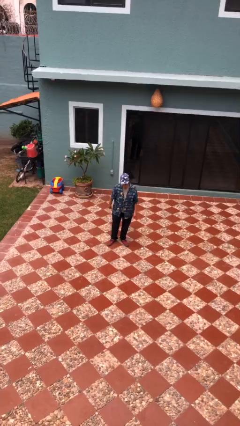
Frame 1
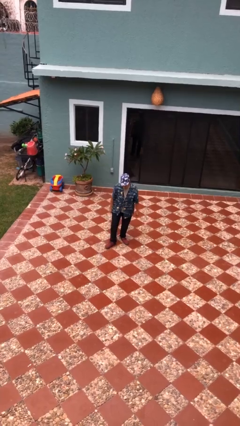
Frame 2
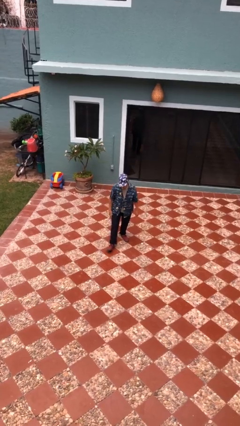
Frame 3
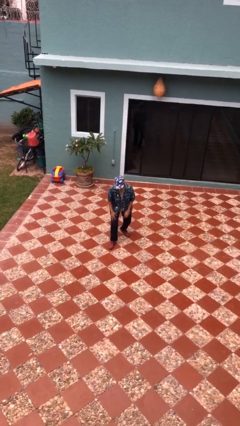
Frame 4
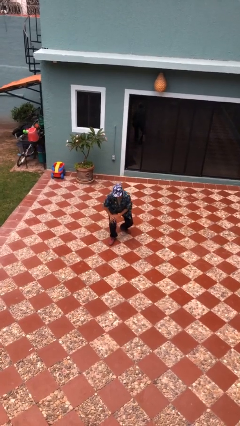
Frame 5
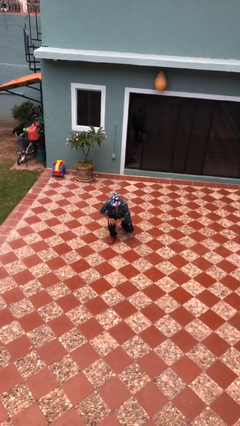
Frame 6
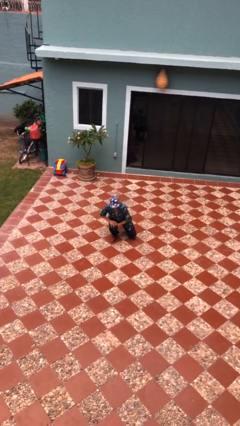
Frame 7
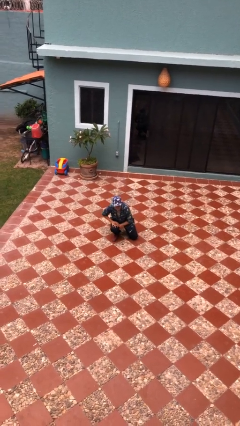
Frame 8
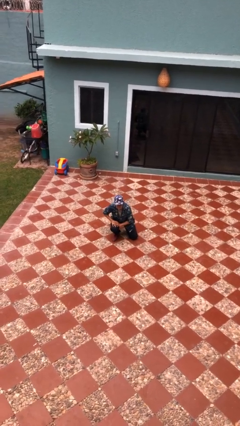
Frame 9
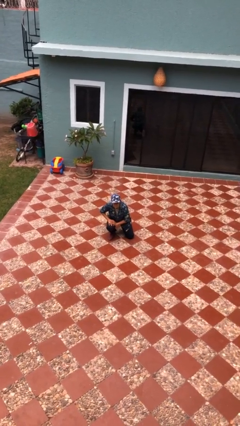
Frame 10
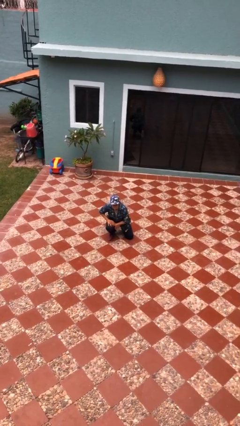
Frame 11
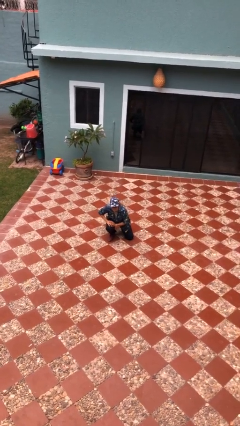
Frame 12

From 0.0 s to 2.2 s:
person kneels

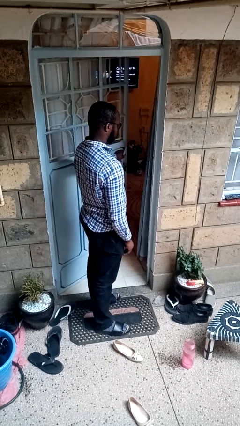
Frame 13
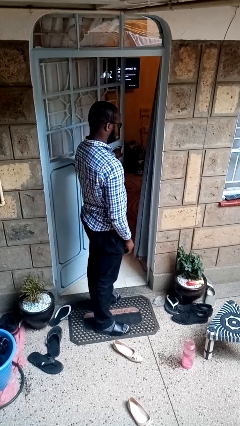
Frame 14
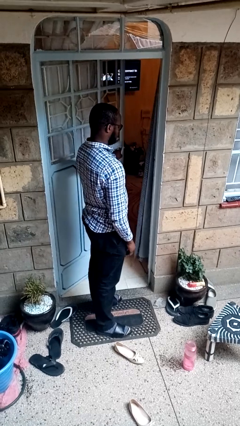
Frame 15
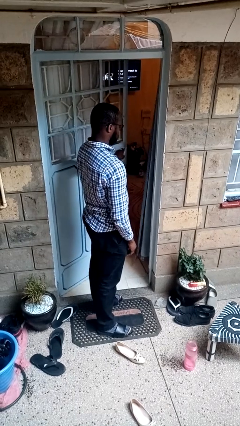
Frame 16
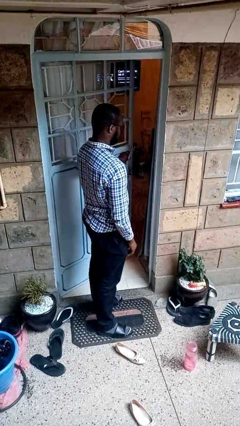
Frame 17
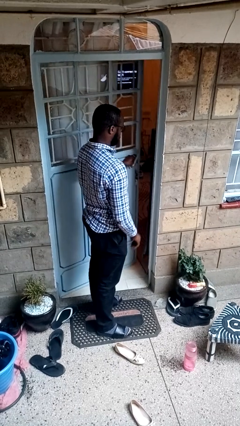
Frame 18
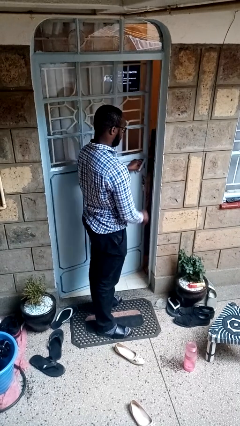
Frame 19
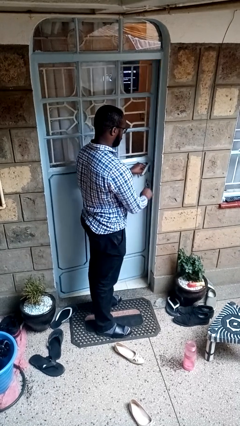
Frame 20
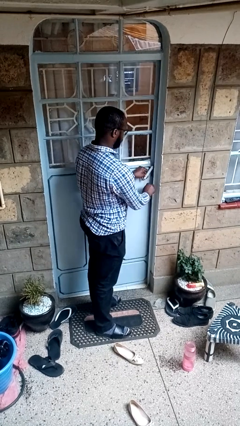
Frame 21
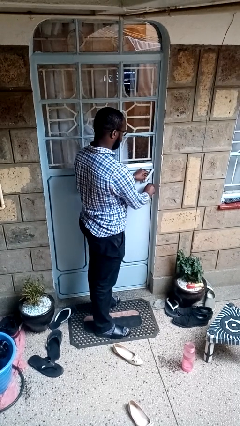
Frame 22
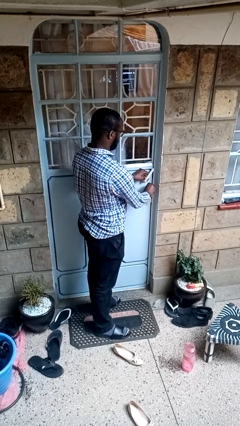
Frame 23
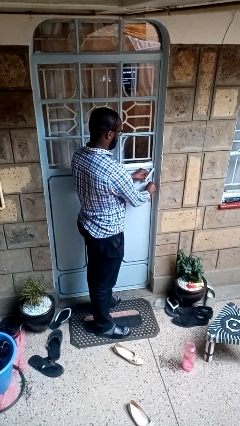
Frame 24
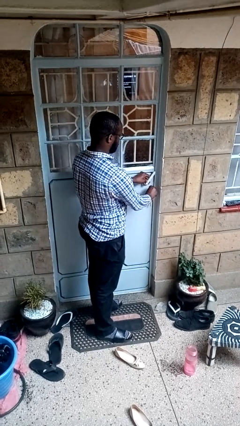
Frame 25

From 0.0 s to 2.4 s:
person closes facility door

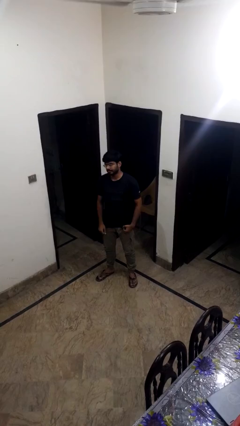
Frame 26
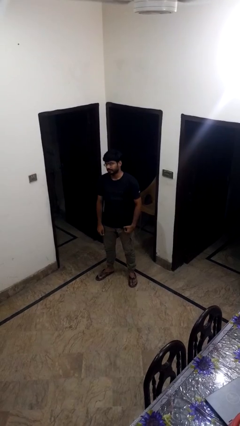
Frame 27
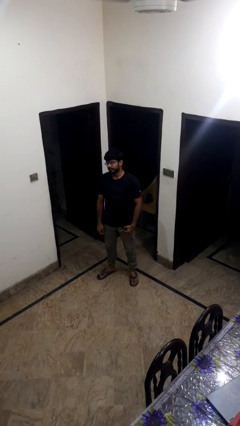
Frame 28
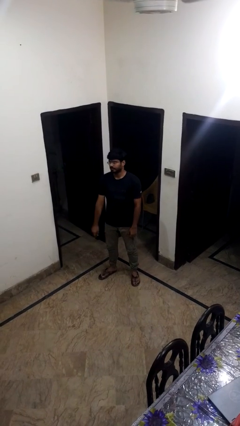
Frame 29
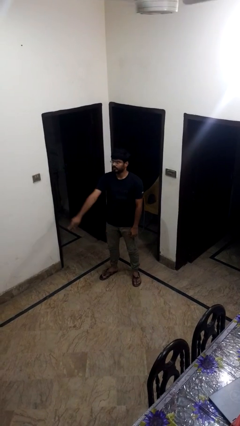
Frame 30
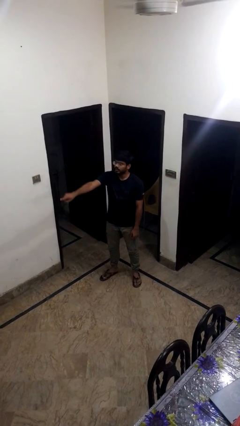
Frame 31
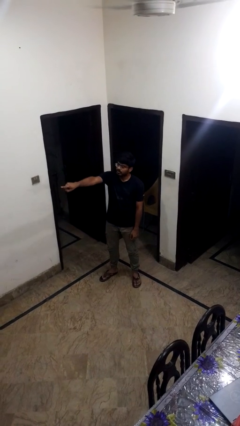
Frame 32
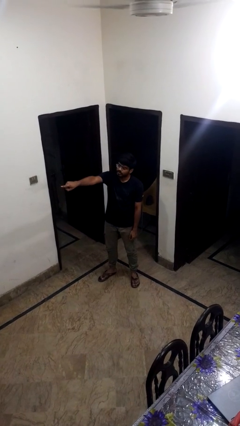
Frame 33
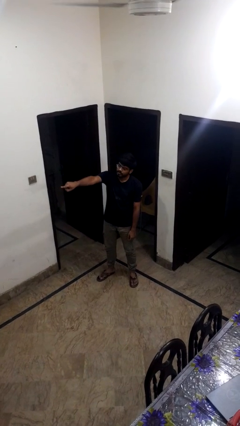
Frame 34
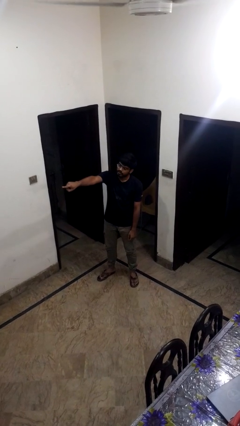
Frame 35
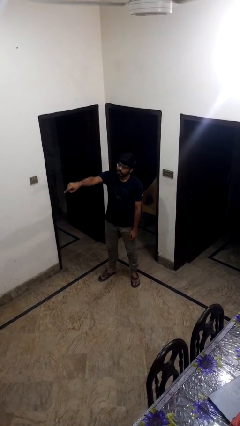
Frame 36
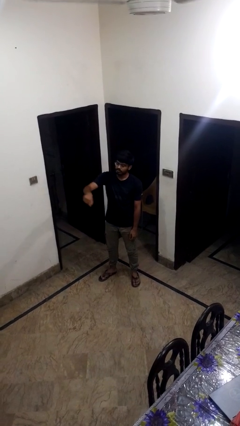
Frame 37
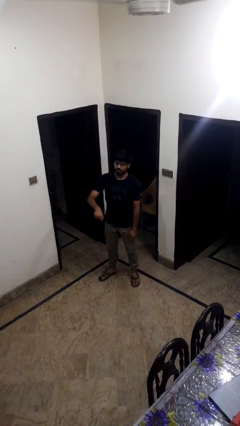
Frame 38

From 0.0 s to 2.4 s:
person points at person

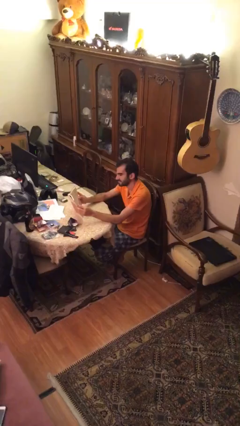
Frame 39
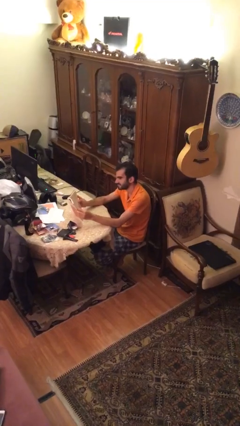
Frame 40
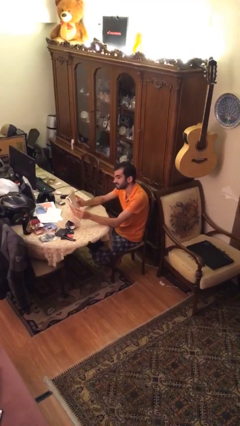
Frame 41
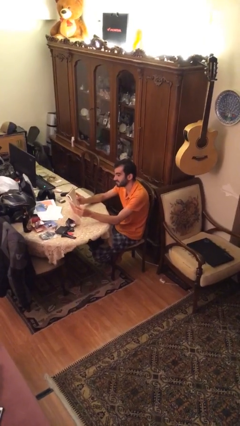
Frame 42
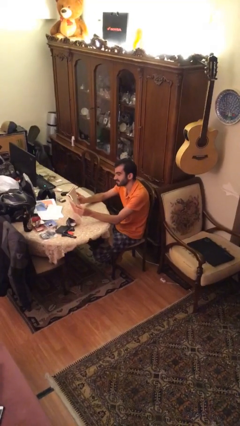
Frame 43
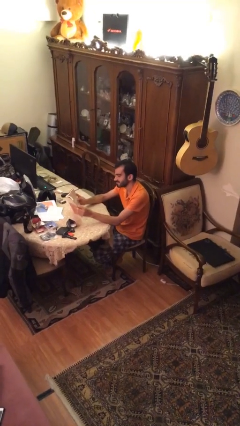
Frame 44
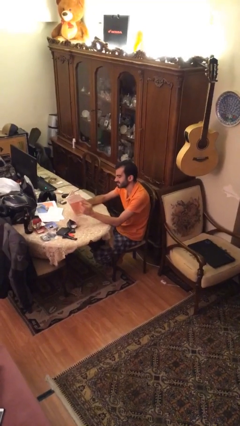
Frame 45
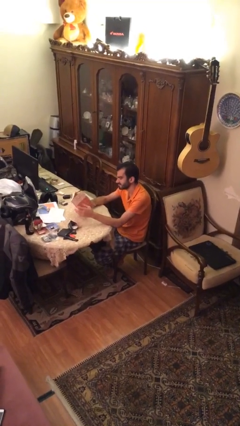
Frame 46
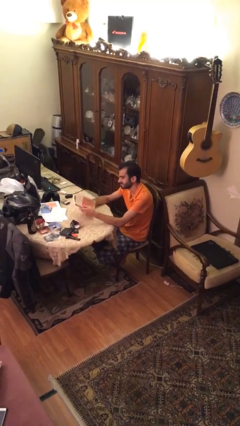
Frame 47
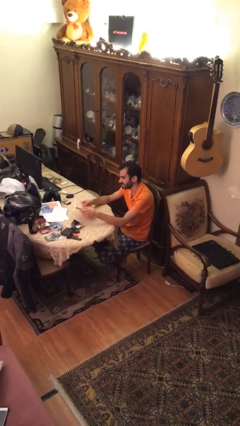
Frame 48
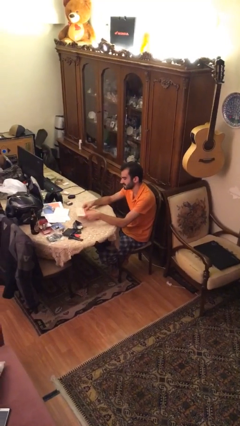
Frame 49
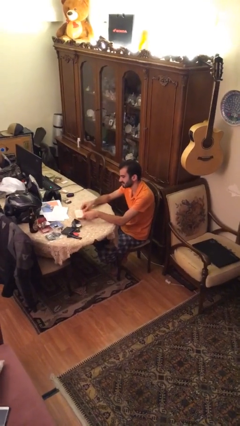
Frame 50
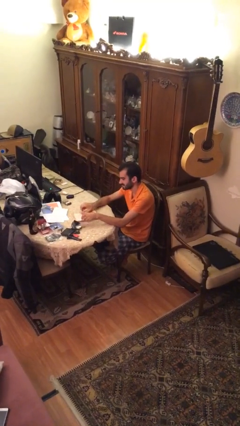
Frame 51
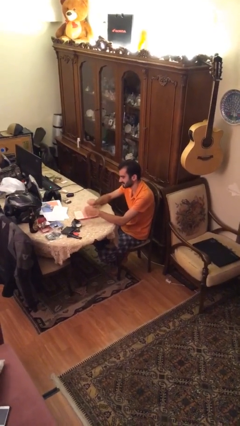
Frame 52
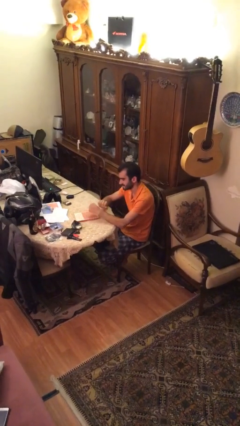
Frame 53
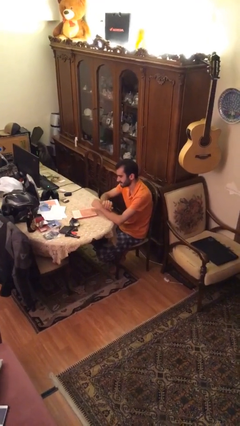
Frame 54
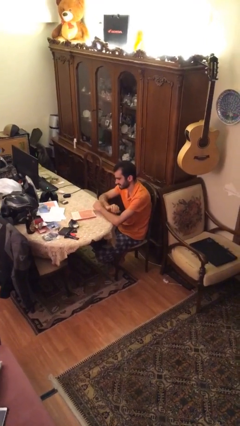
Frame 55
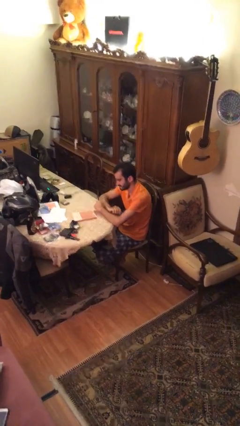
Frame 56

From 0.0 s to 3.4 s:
person puts down object on table

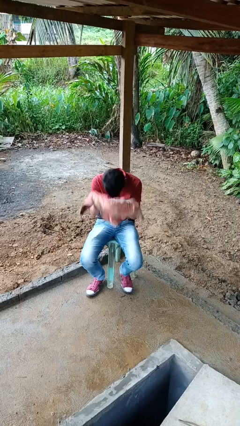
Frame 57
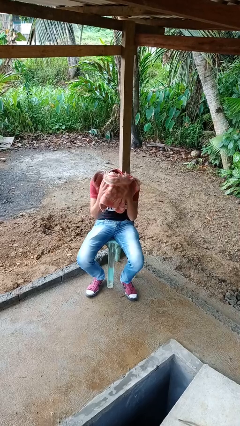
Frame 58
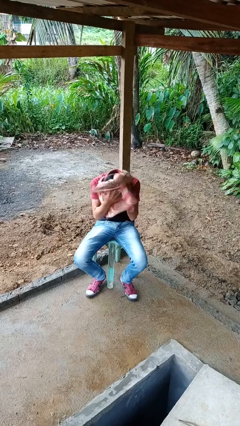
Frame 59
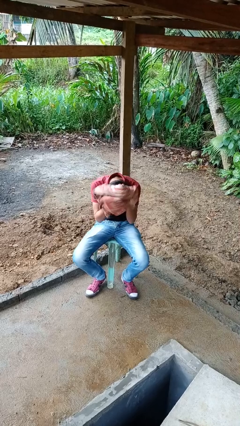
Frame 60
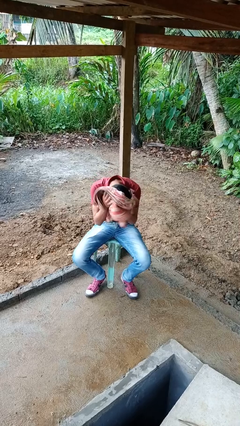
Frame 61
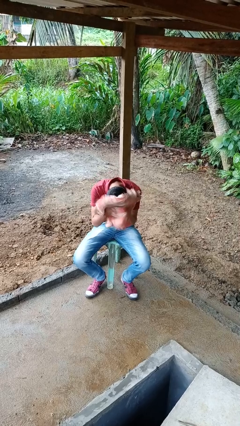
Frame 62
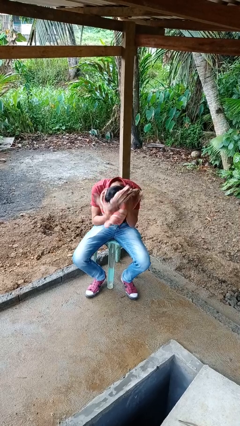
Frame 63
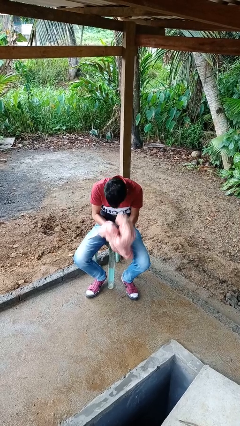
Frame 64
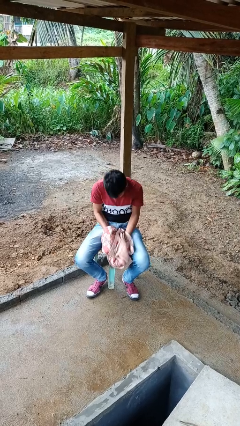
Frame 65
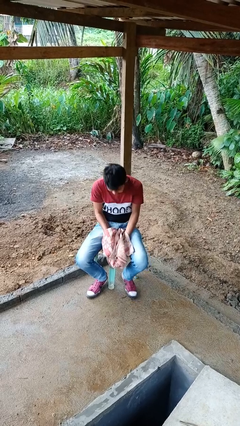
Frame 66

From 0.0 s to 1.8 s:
person dries hair with towel

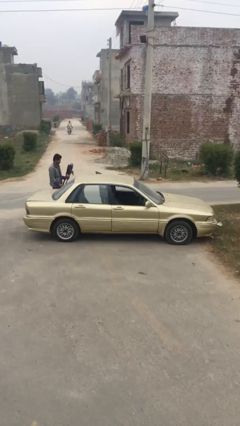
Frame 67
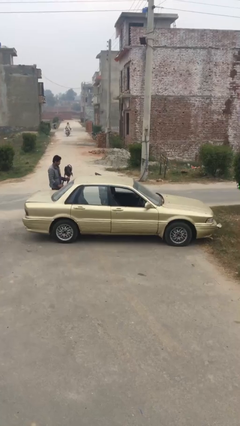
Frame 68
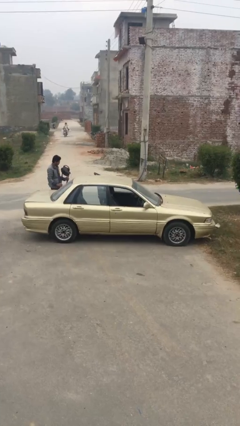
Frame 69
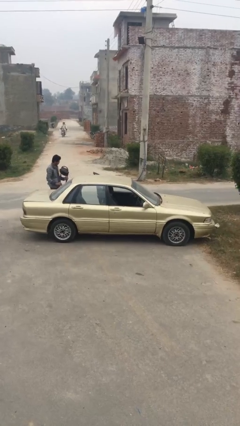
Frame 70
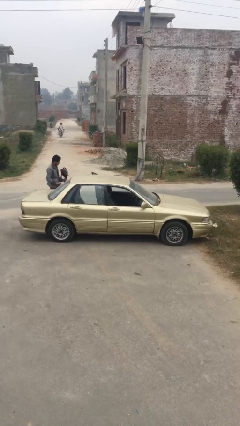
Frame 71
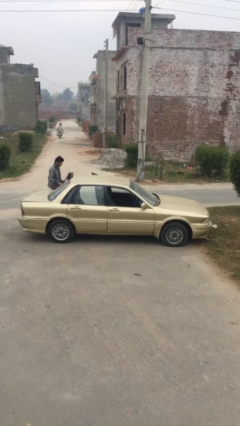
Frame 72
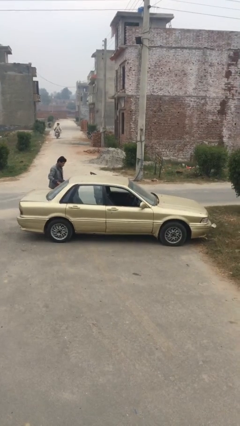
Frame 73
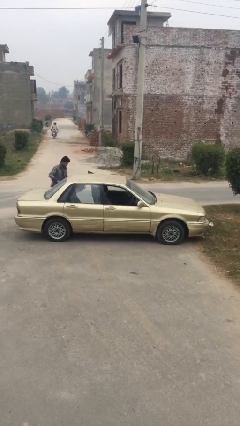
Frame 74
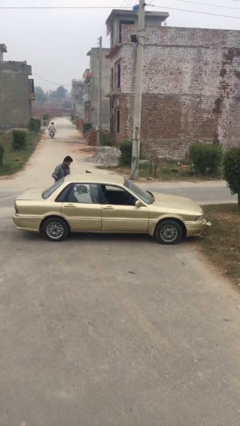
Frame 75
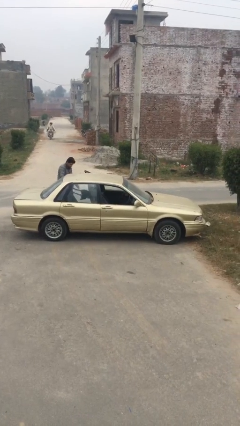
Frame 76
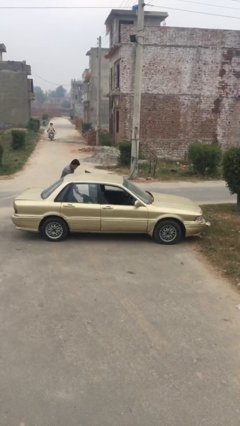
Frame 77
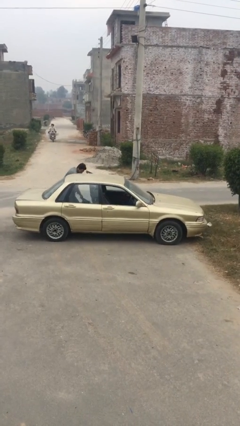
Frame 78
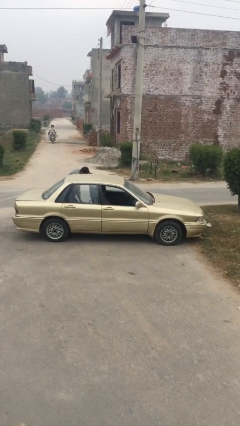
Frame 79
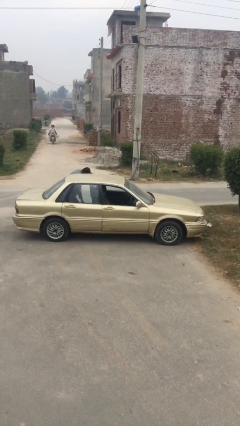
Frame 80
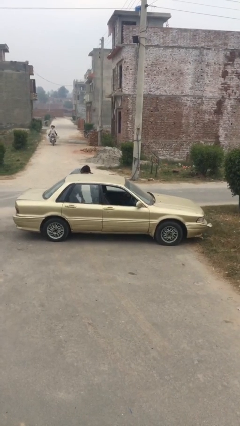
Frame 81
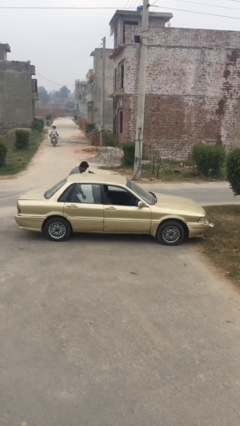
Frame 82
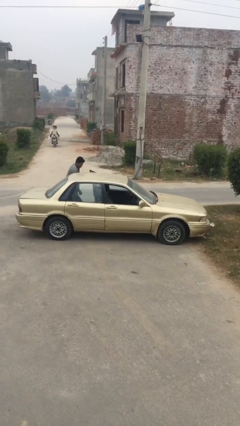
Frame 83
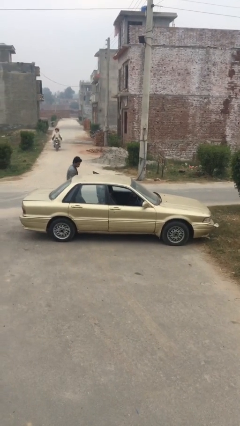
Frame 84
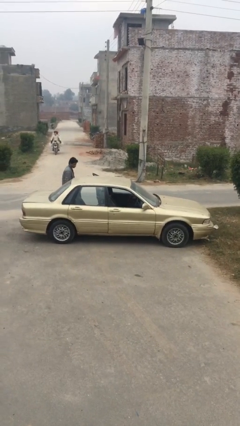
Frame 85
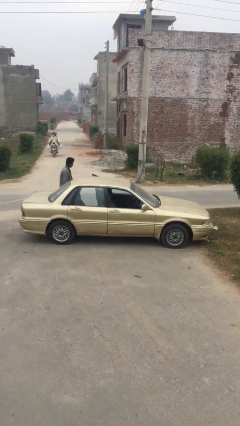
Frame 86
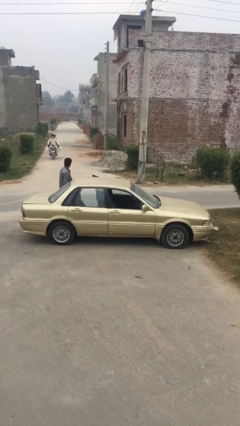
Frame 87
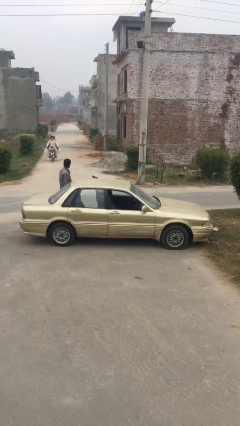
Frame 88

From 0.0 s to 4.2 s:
person loads car

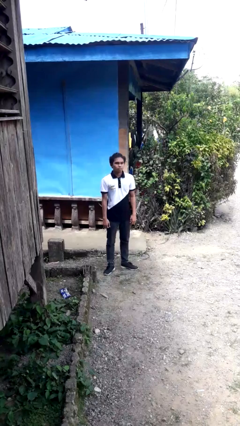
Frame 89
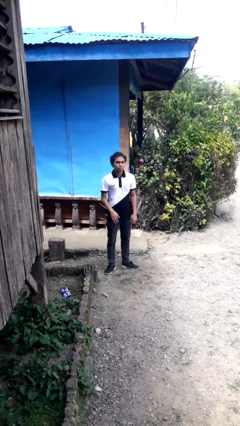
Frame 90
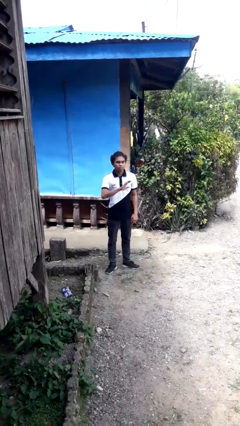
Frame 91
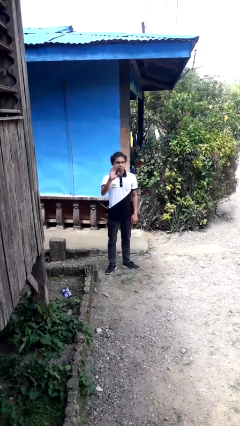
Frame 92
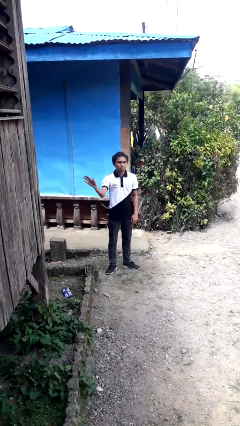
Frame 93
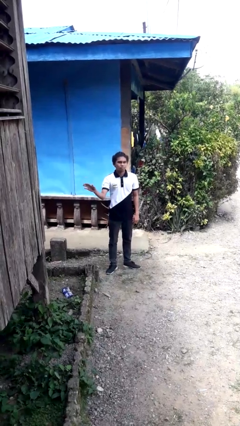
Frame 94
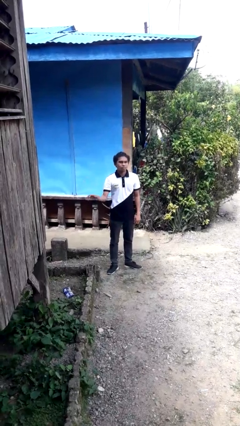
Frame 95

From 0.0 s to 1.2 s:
person gestures swipe right
